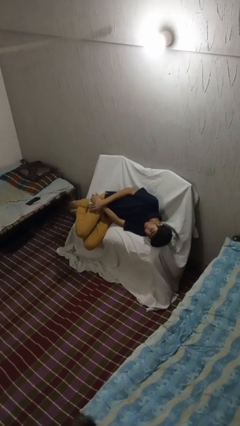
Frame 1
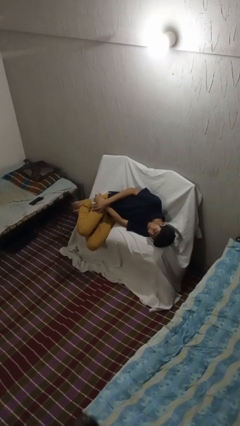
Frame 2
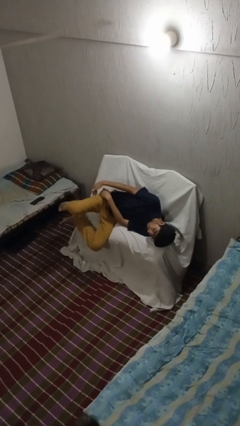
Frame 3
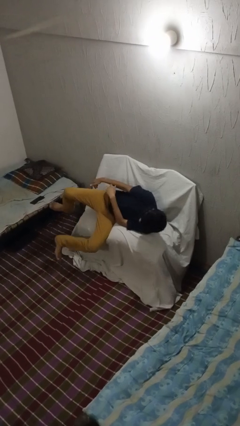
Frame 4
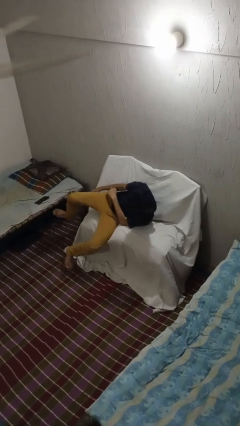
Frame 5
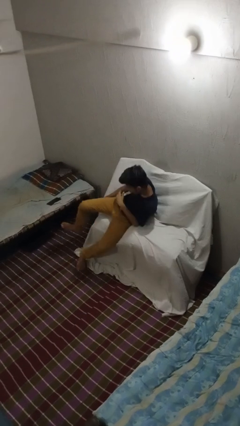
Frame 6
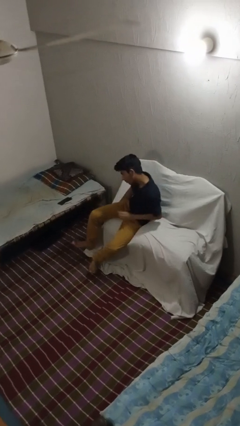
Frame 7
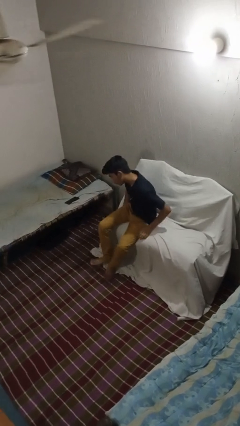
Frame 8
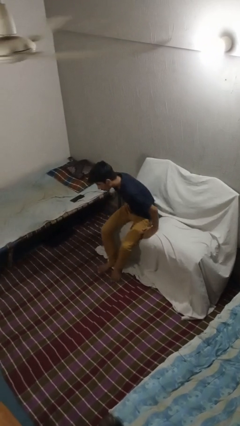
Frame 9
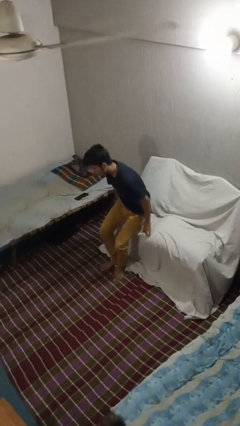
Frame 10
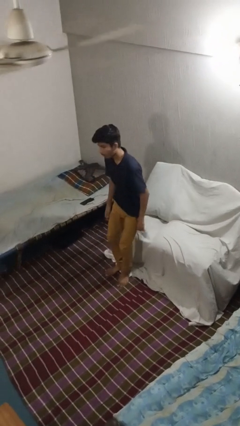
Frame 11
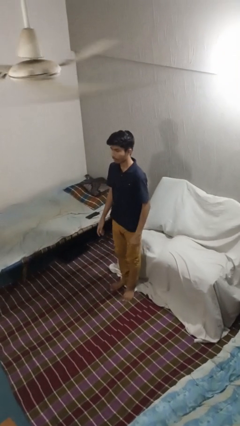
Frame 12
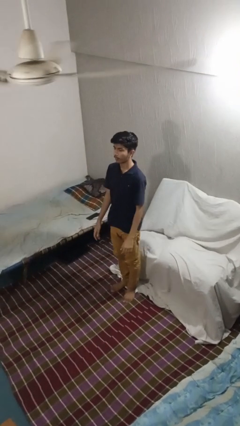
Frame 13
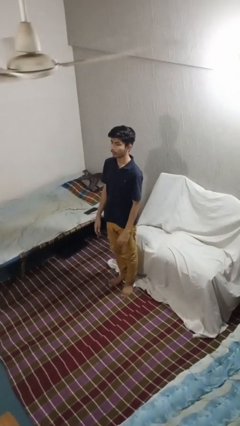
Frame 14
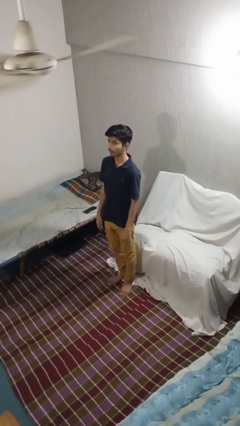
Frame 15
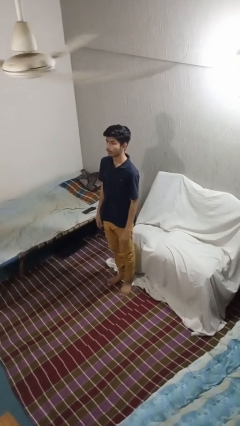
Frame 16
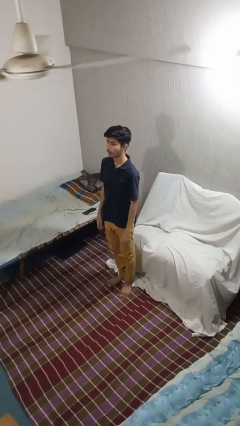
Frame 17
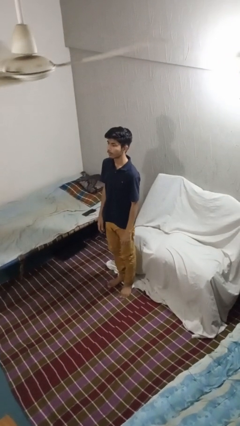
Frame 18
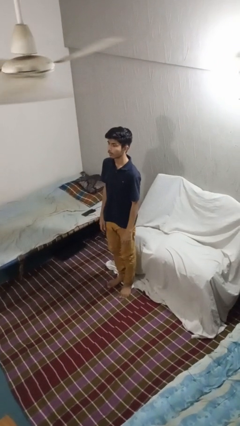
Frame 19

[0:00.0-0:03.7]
person stands up

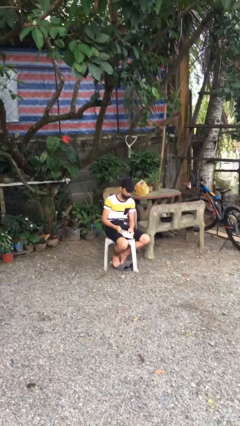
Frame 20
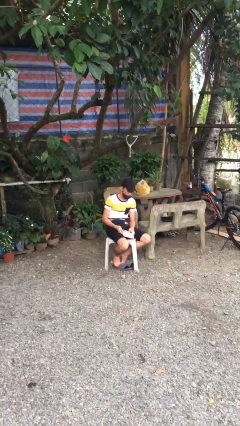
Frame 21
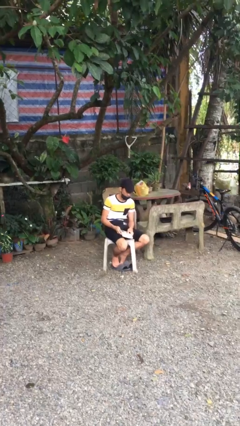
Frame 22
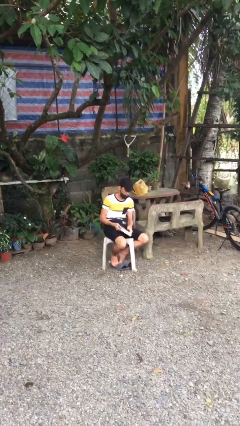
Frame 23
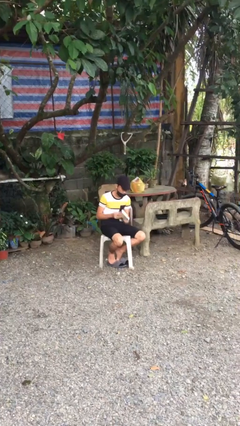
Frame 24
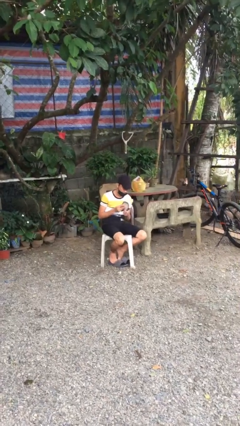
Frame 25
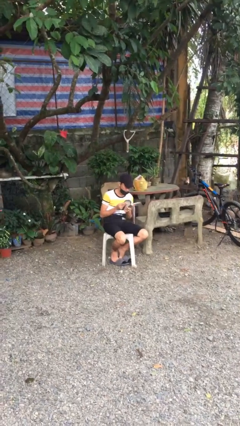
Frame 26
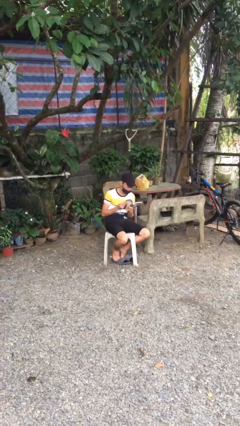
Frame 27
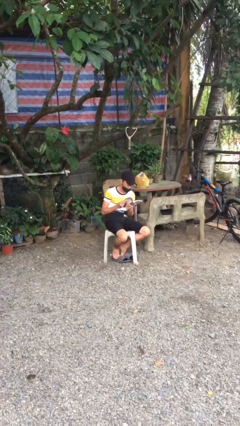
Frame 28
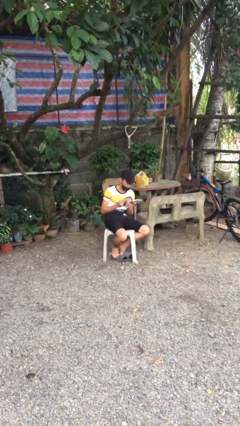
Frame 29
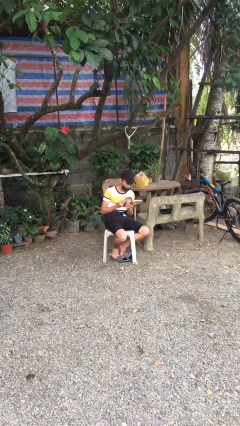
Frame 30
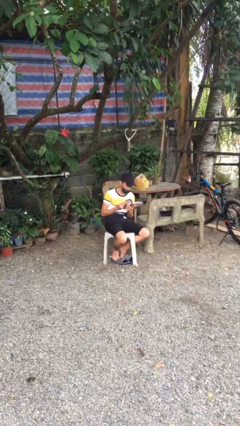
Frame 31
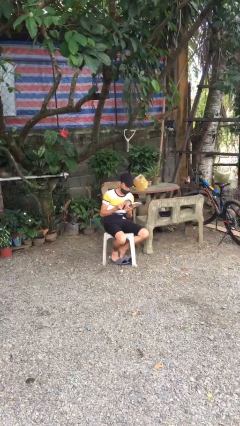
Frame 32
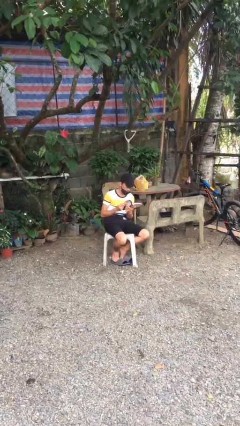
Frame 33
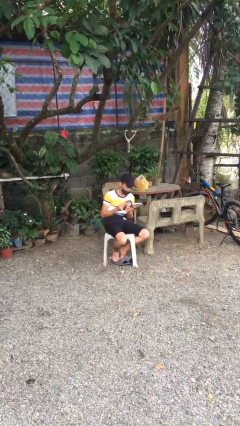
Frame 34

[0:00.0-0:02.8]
person reads document

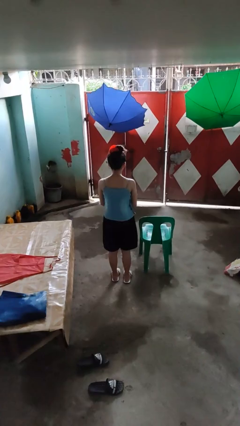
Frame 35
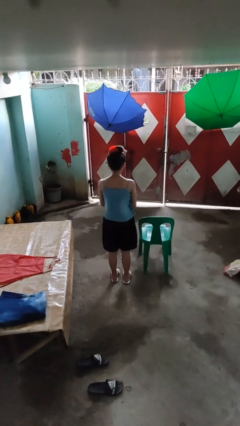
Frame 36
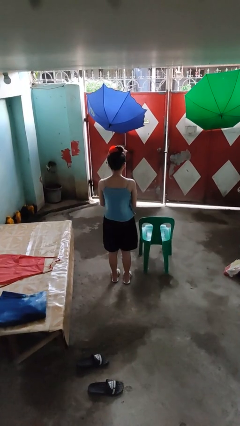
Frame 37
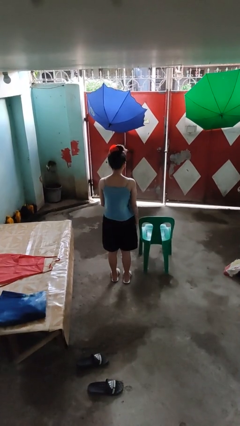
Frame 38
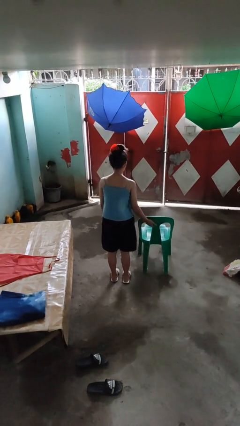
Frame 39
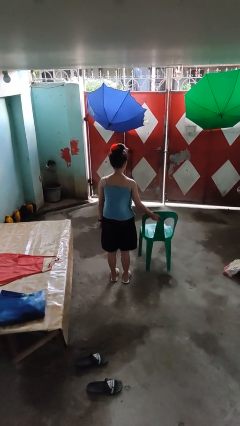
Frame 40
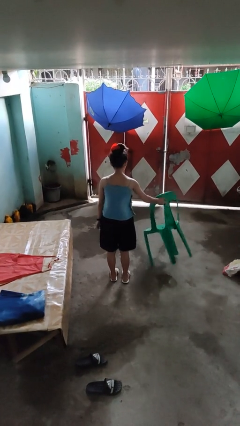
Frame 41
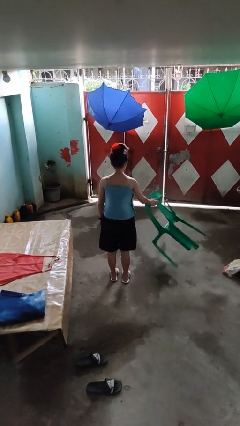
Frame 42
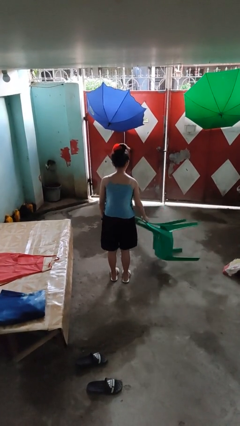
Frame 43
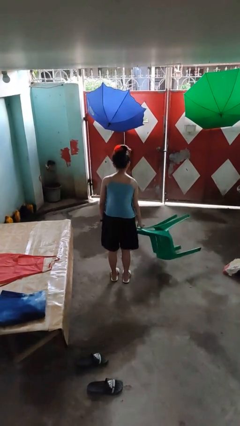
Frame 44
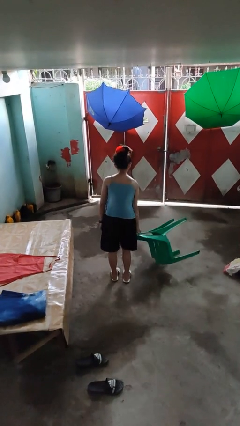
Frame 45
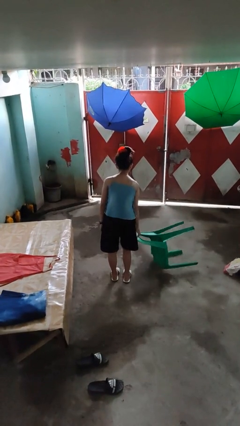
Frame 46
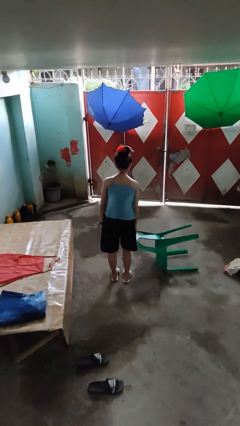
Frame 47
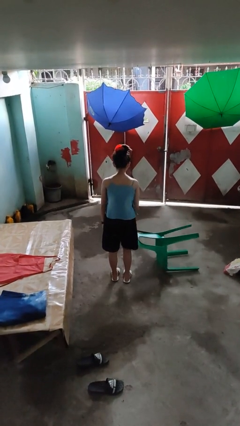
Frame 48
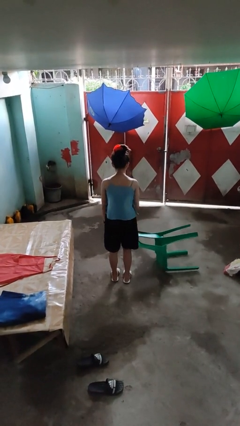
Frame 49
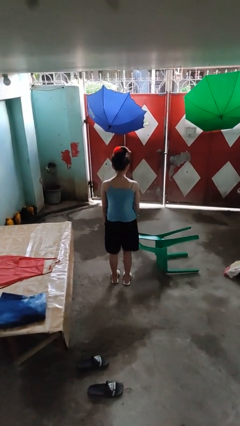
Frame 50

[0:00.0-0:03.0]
person knocks over furniture

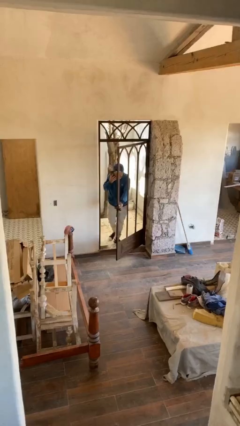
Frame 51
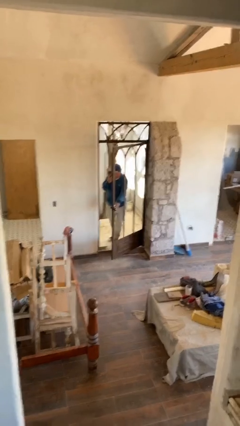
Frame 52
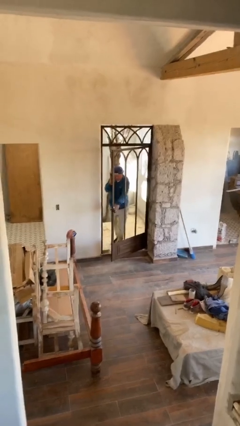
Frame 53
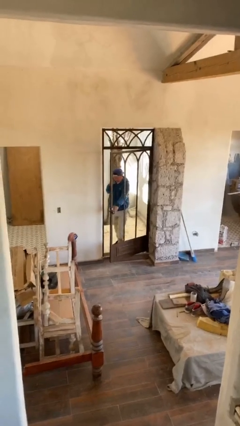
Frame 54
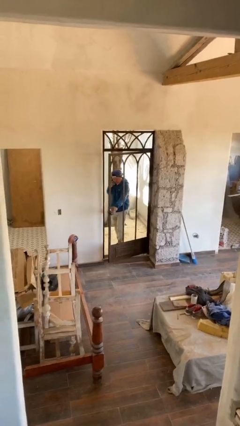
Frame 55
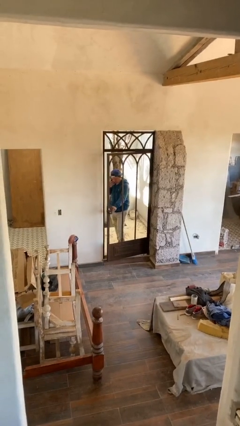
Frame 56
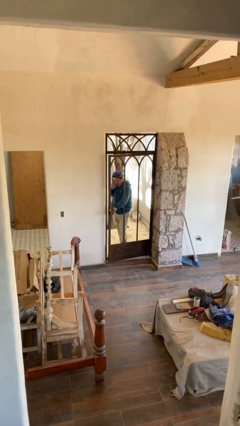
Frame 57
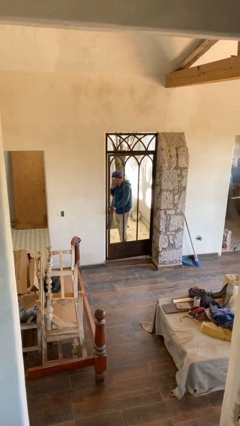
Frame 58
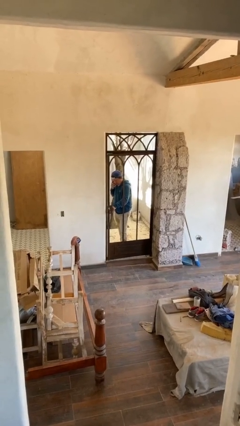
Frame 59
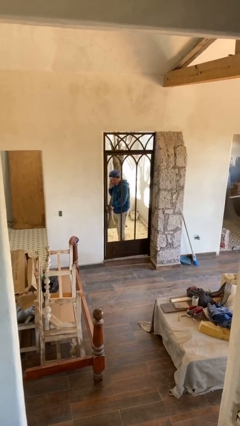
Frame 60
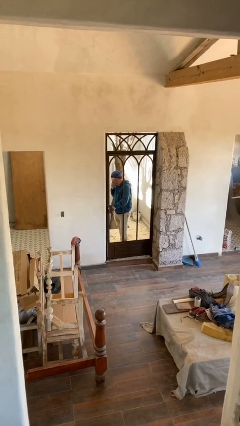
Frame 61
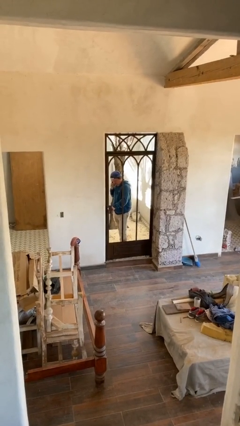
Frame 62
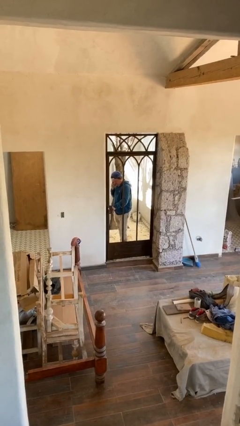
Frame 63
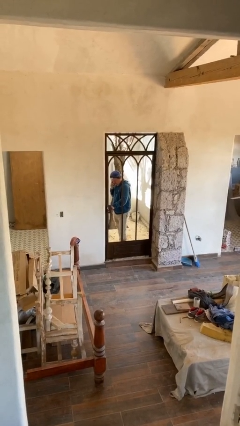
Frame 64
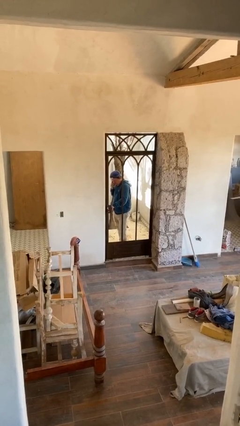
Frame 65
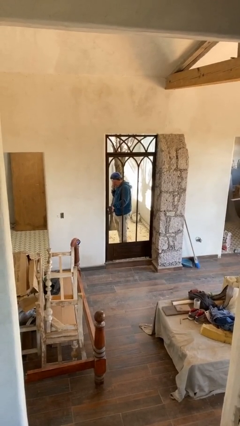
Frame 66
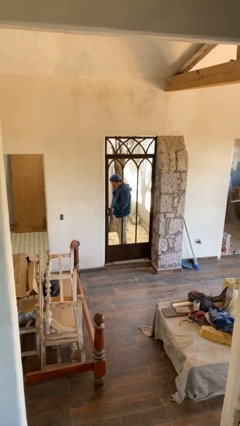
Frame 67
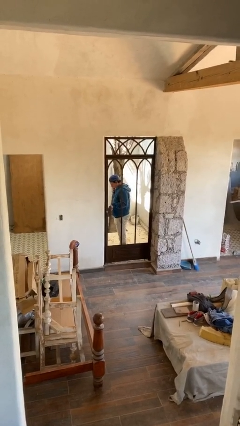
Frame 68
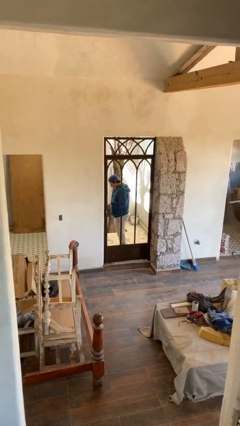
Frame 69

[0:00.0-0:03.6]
person closes facility door

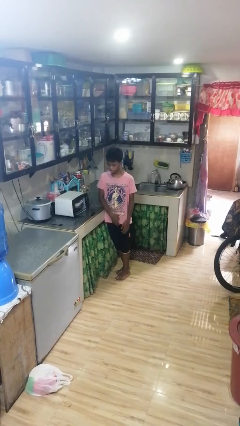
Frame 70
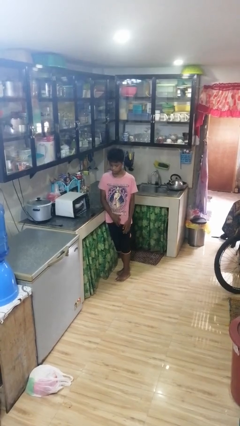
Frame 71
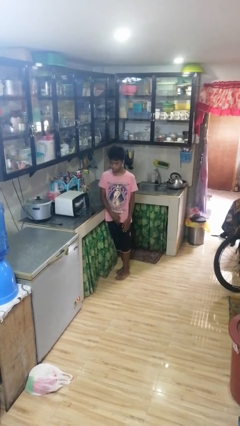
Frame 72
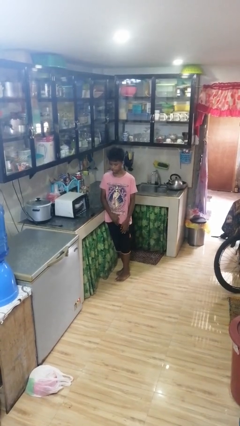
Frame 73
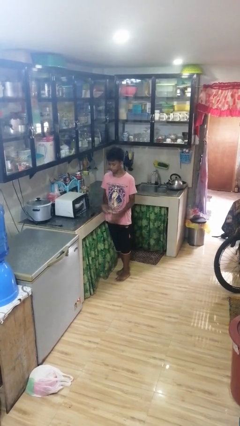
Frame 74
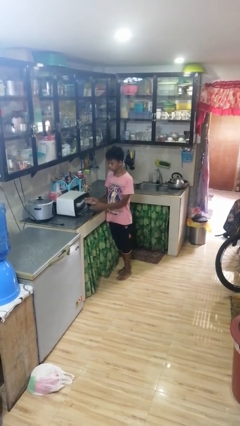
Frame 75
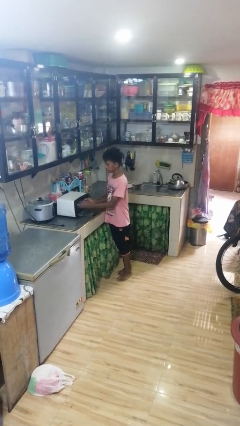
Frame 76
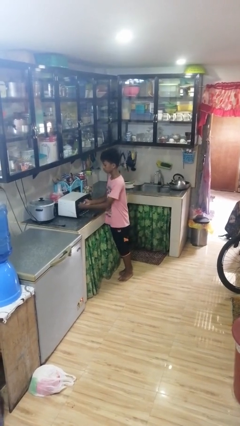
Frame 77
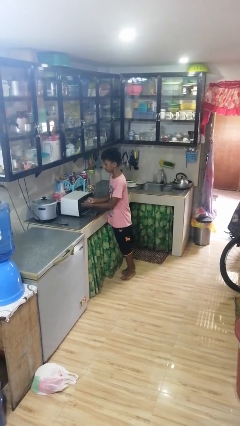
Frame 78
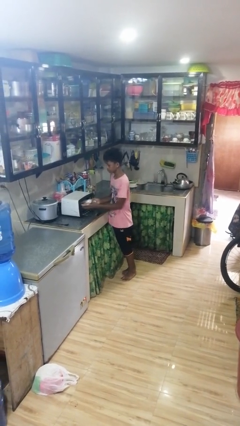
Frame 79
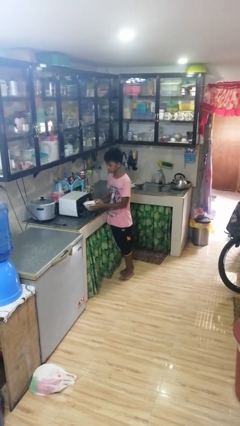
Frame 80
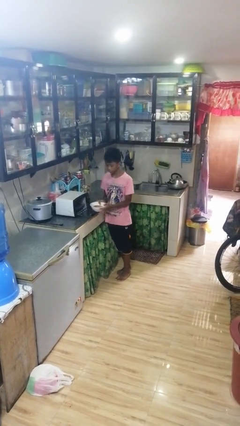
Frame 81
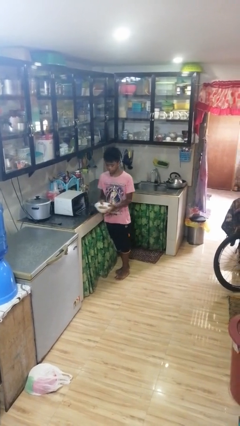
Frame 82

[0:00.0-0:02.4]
person takes object from microwave

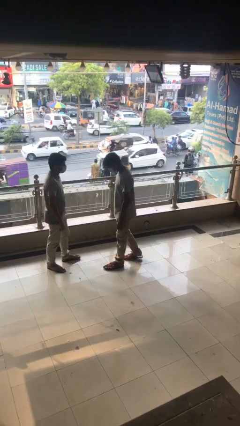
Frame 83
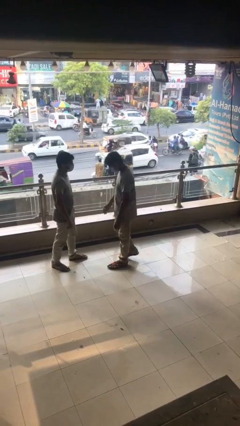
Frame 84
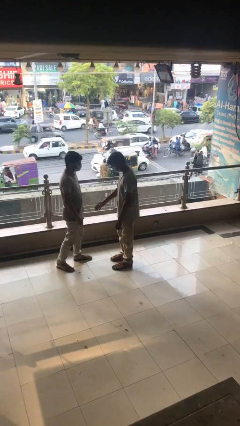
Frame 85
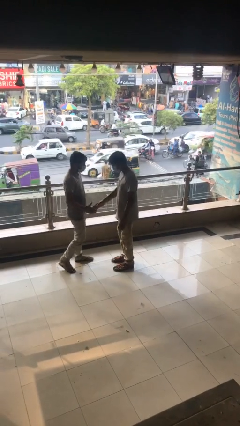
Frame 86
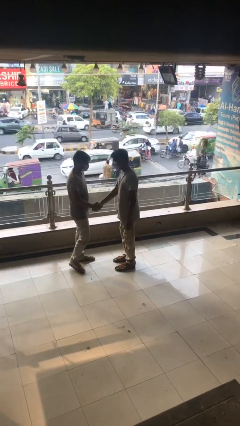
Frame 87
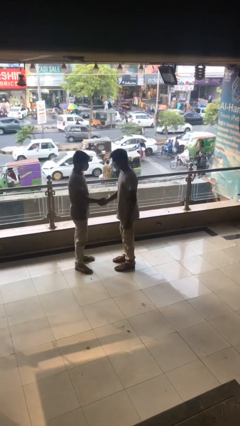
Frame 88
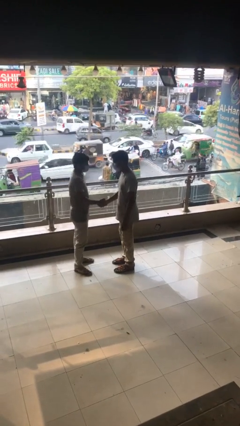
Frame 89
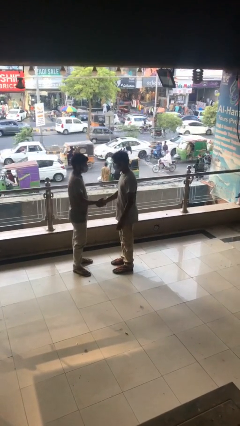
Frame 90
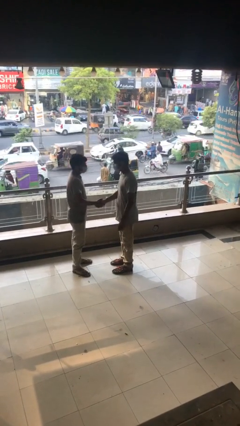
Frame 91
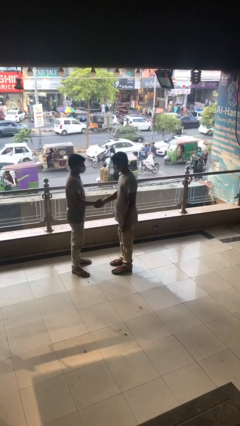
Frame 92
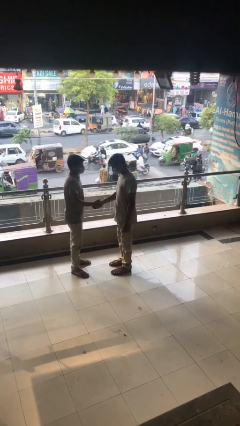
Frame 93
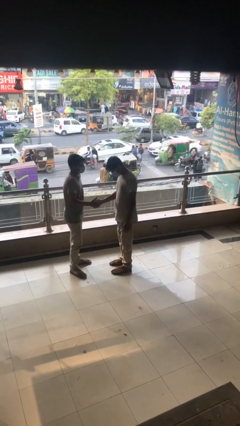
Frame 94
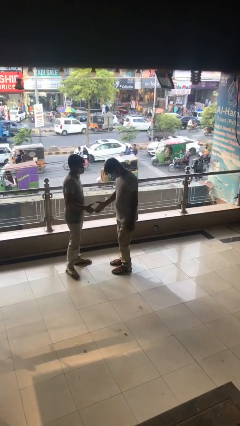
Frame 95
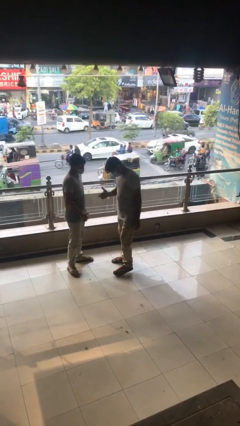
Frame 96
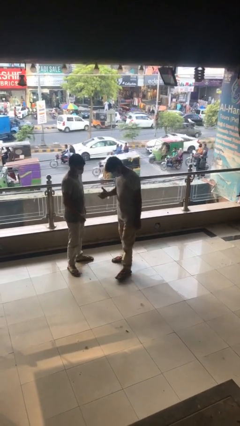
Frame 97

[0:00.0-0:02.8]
person shakes hand
